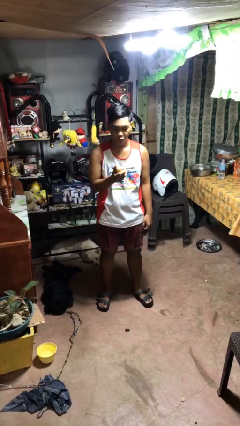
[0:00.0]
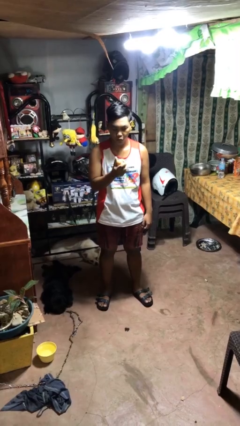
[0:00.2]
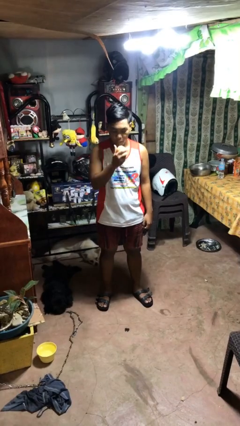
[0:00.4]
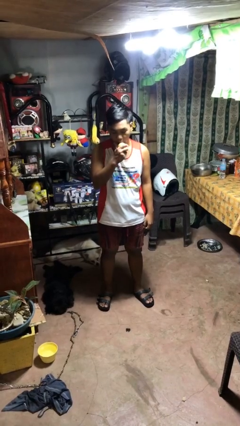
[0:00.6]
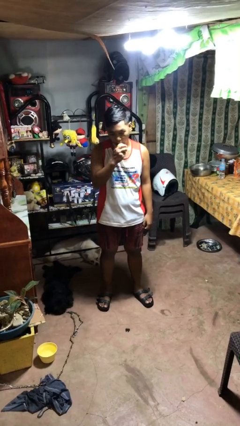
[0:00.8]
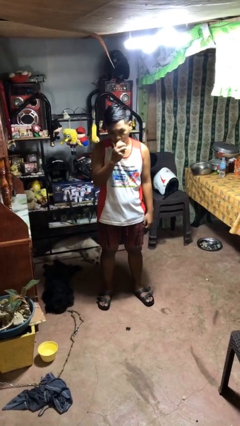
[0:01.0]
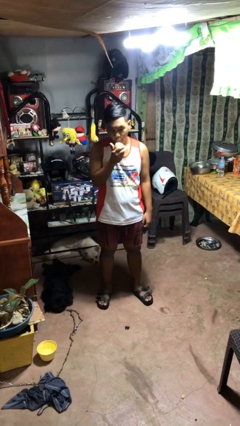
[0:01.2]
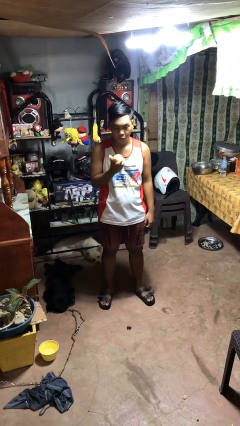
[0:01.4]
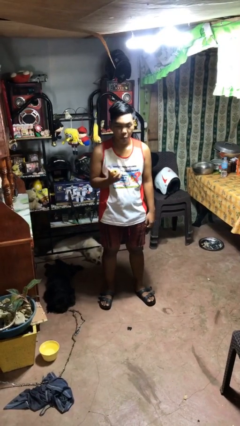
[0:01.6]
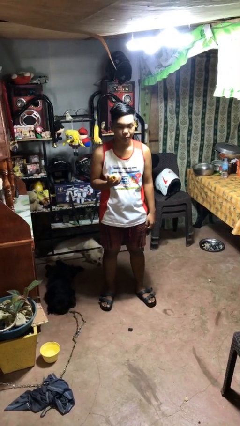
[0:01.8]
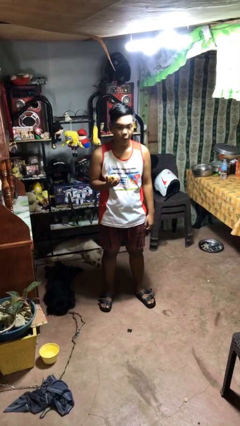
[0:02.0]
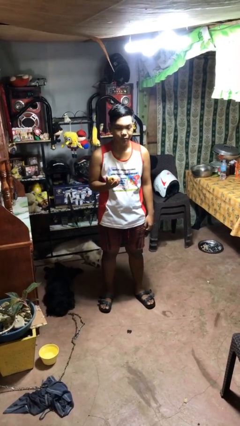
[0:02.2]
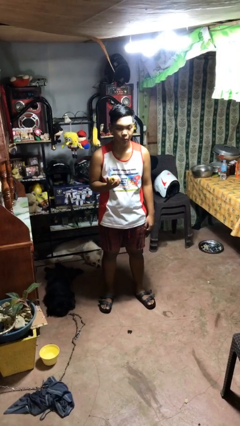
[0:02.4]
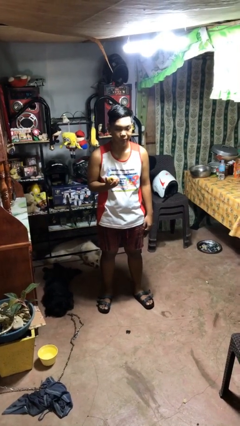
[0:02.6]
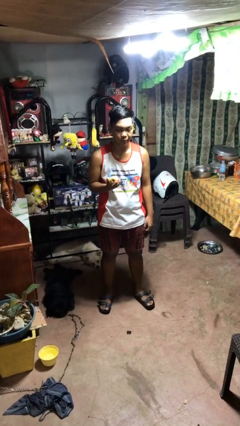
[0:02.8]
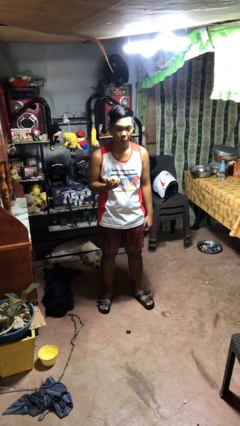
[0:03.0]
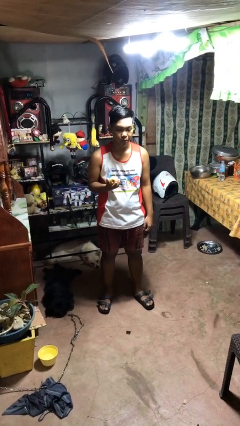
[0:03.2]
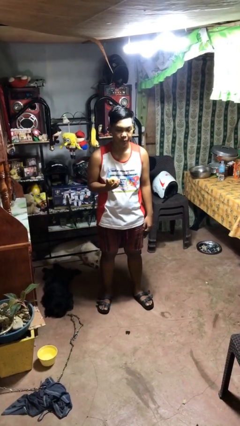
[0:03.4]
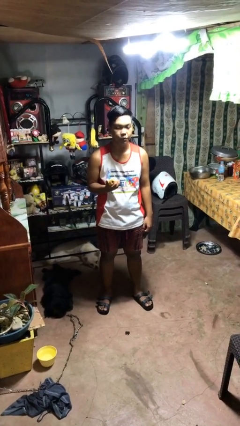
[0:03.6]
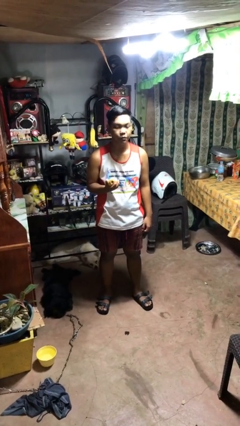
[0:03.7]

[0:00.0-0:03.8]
person eats apple

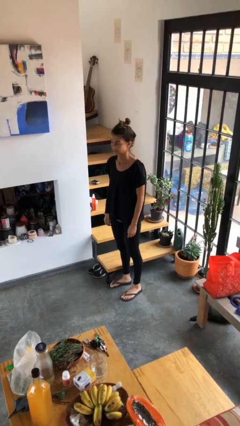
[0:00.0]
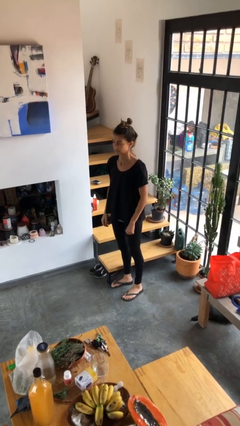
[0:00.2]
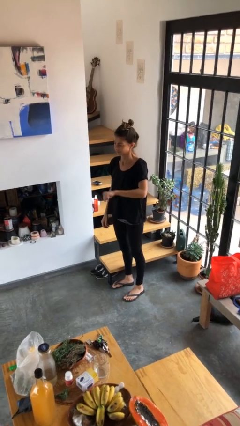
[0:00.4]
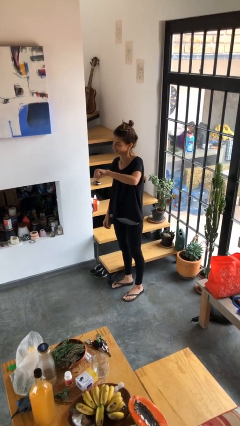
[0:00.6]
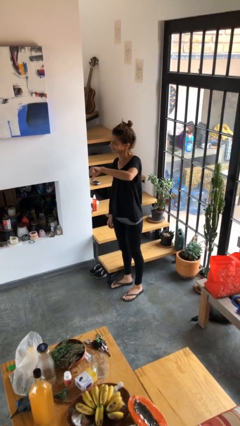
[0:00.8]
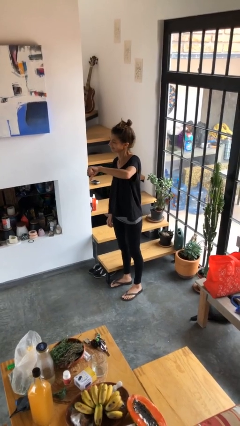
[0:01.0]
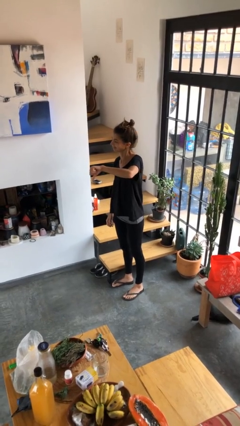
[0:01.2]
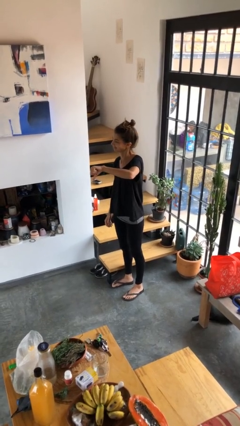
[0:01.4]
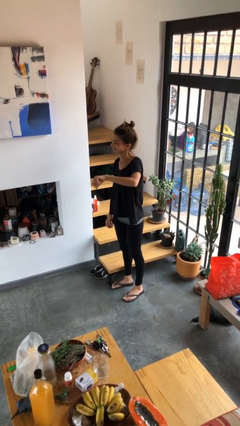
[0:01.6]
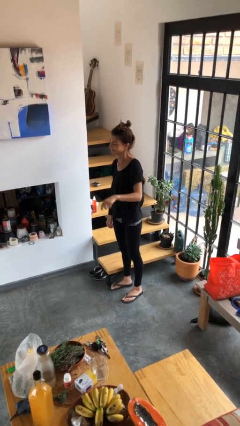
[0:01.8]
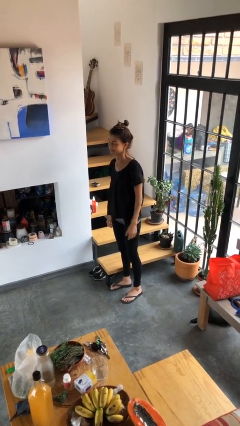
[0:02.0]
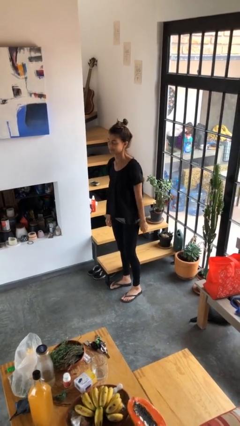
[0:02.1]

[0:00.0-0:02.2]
person gestures thumbs down

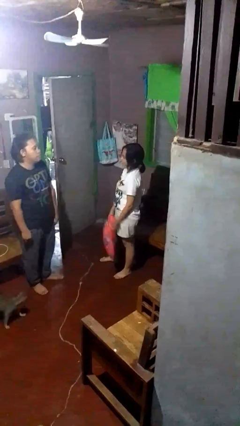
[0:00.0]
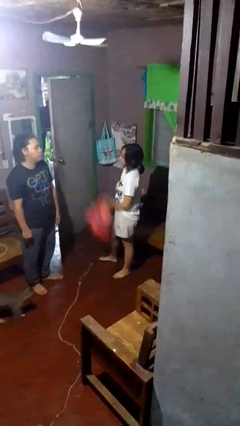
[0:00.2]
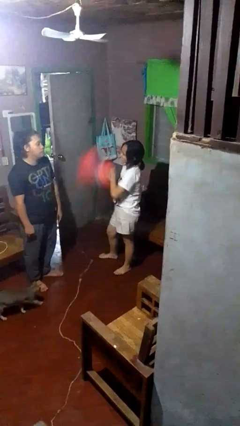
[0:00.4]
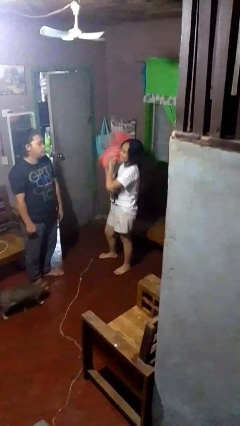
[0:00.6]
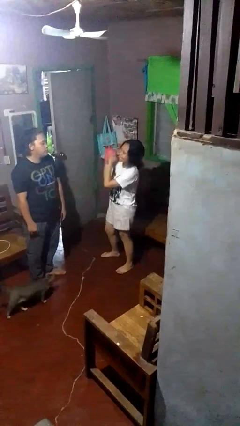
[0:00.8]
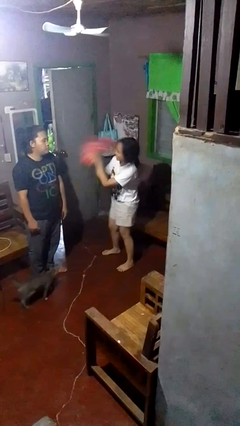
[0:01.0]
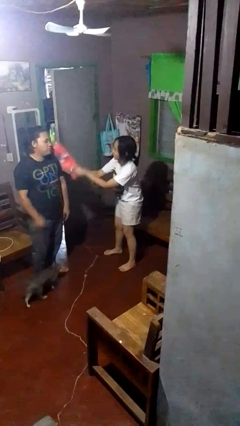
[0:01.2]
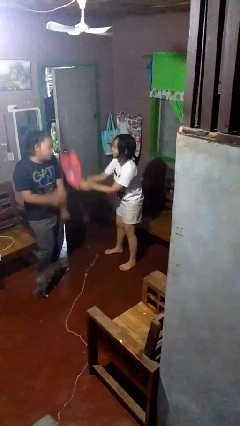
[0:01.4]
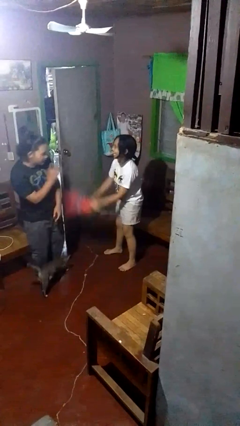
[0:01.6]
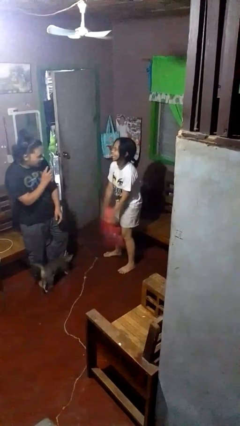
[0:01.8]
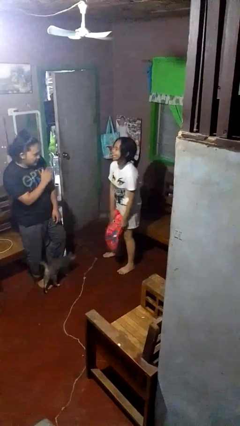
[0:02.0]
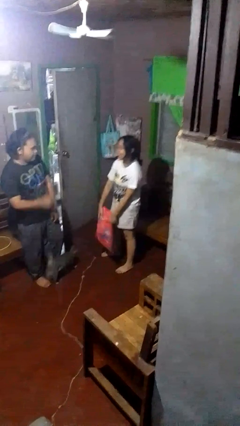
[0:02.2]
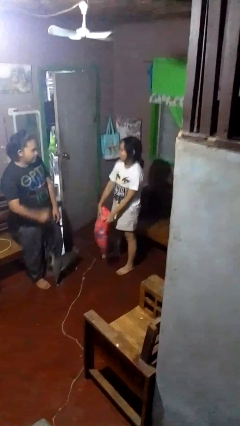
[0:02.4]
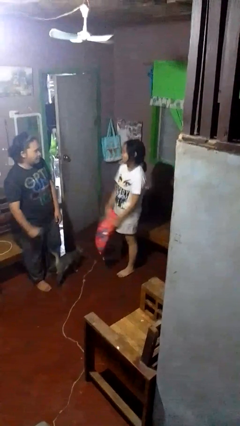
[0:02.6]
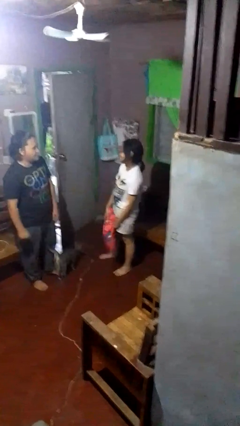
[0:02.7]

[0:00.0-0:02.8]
person hits person with pillow

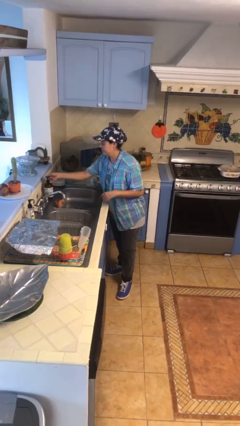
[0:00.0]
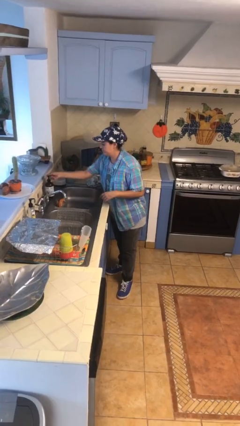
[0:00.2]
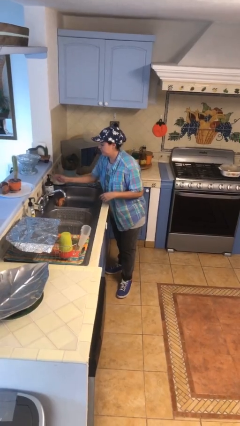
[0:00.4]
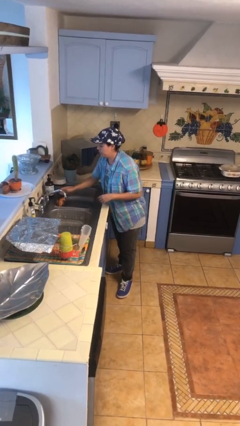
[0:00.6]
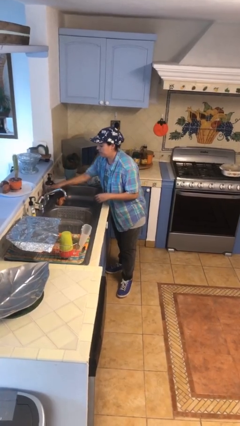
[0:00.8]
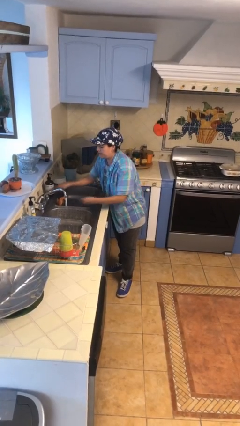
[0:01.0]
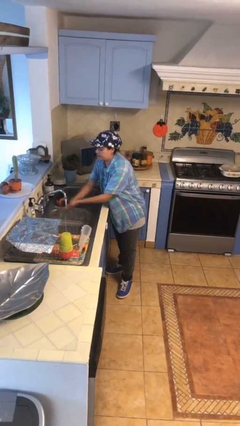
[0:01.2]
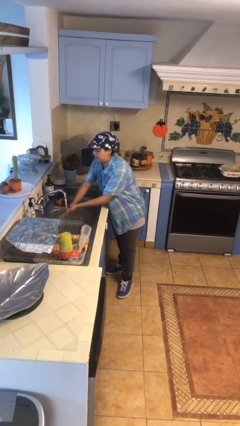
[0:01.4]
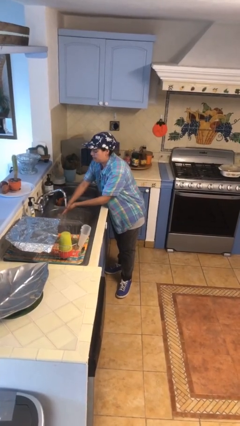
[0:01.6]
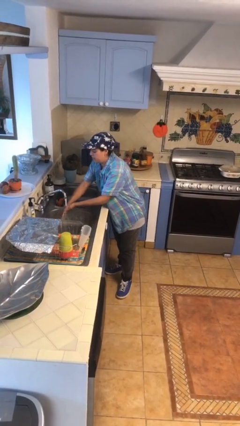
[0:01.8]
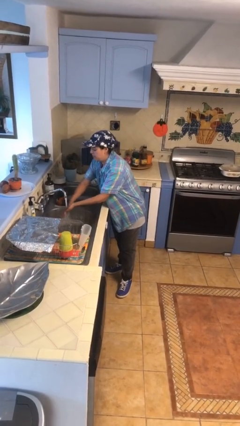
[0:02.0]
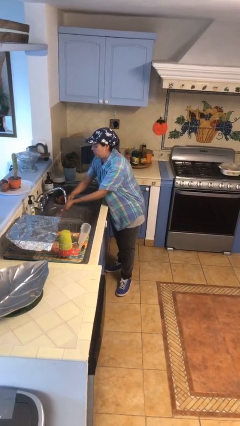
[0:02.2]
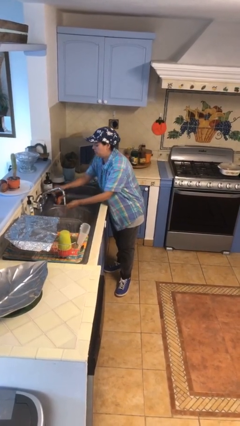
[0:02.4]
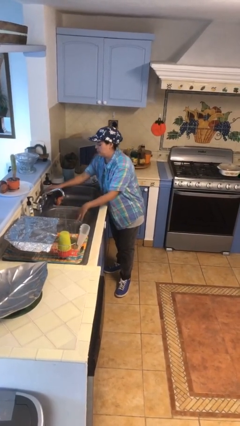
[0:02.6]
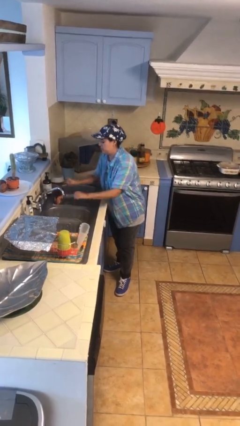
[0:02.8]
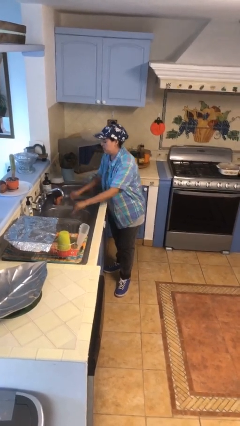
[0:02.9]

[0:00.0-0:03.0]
person washes hands

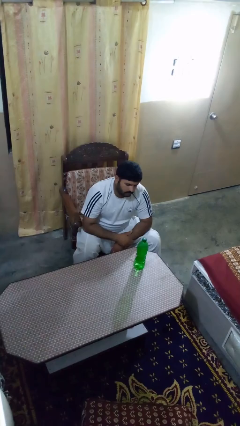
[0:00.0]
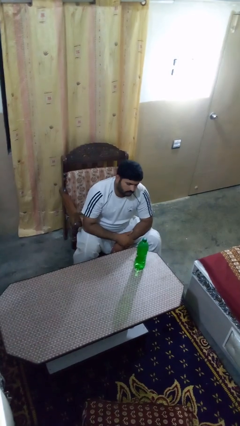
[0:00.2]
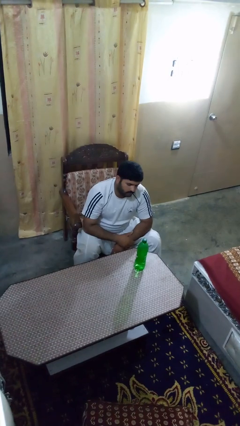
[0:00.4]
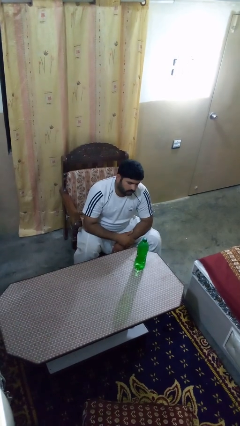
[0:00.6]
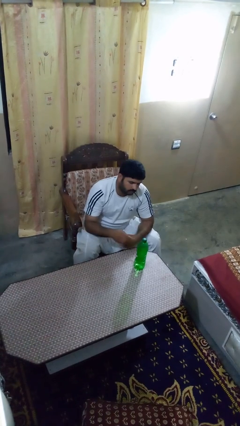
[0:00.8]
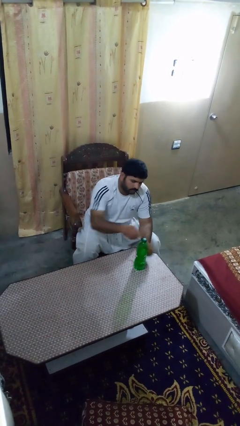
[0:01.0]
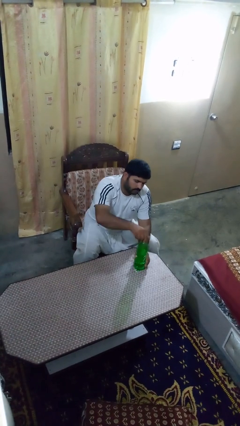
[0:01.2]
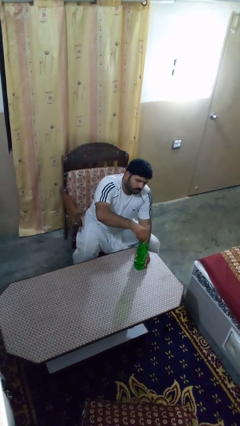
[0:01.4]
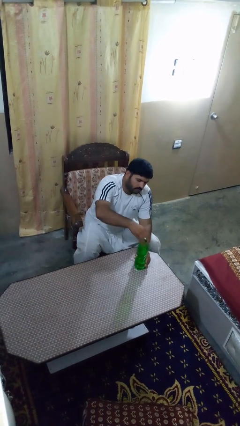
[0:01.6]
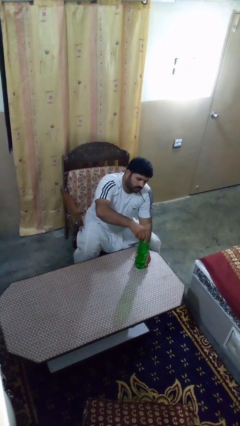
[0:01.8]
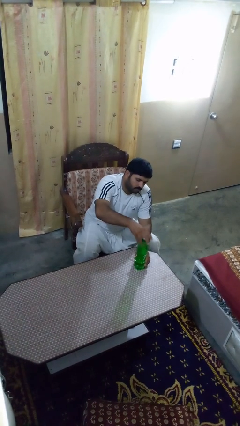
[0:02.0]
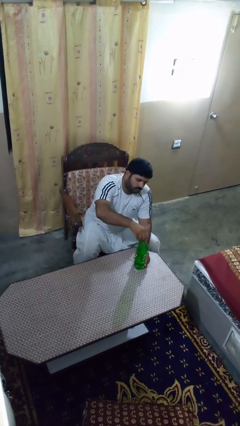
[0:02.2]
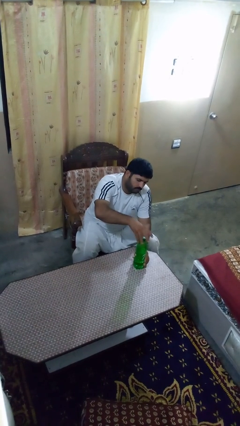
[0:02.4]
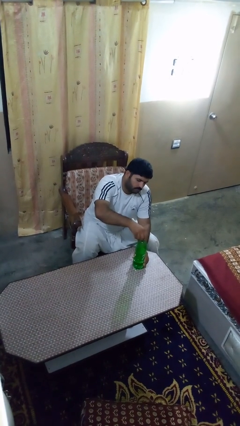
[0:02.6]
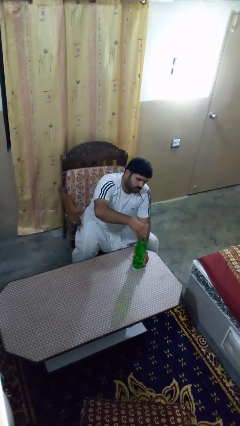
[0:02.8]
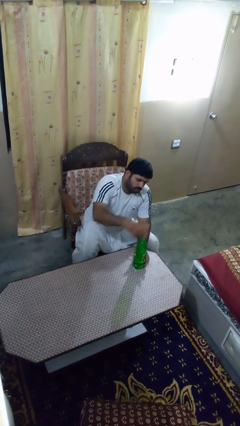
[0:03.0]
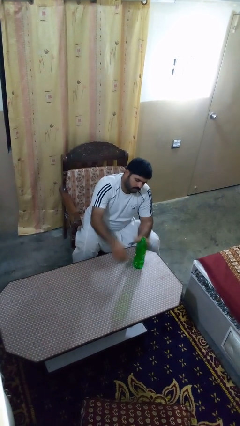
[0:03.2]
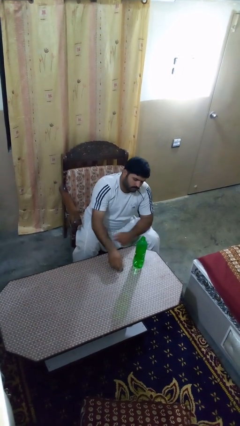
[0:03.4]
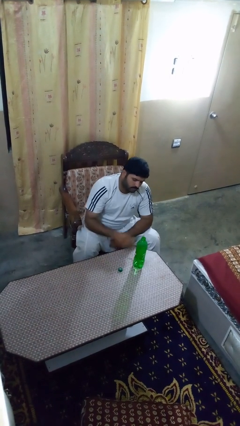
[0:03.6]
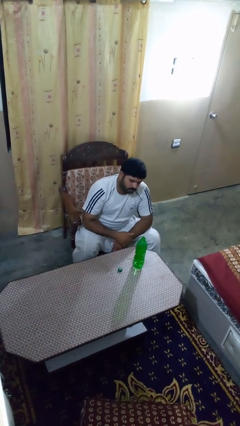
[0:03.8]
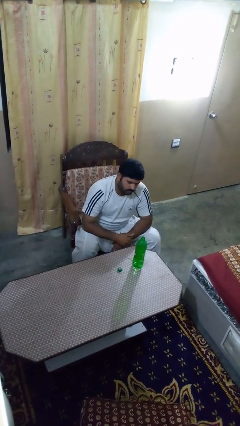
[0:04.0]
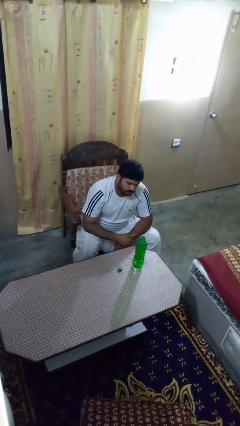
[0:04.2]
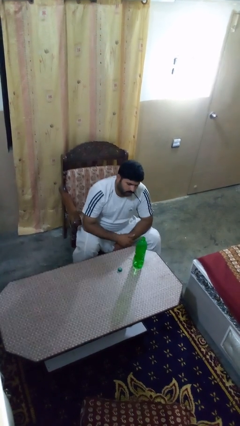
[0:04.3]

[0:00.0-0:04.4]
person unscrews lid from bottle

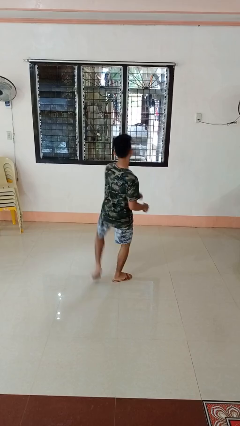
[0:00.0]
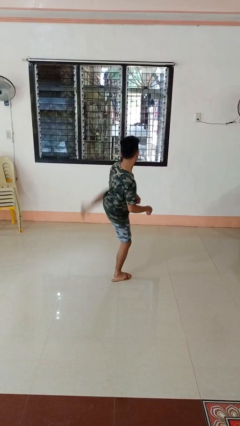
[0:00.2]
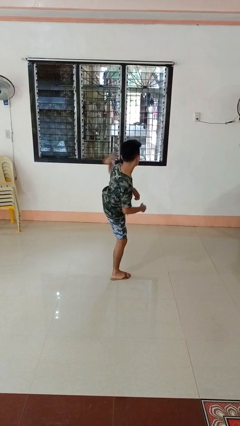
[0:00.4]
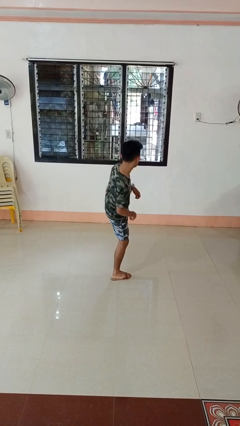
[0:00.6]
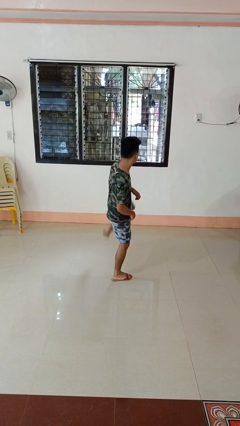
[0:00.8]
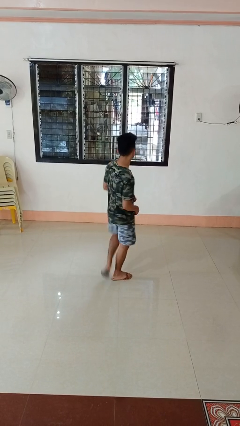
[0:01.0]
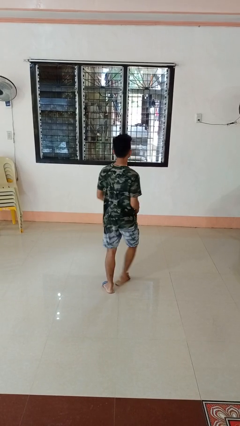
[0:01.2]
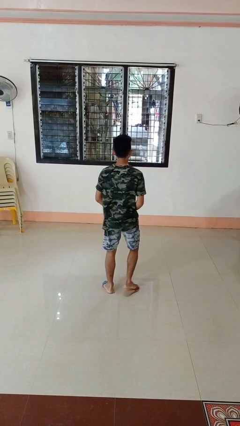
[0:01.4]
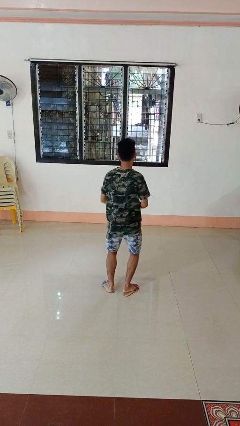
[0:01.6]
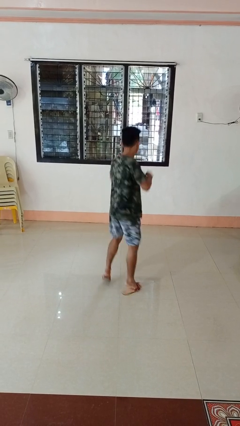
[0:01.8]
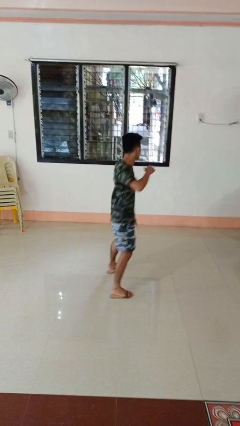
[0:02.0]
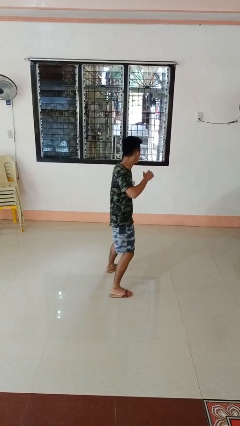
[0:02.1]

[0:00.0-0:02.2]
person karate kicks
